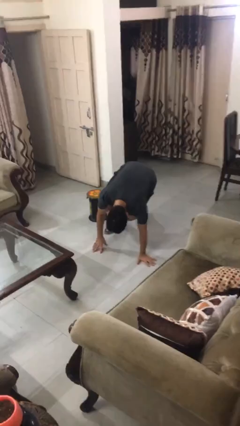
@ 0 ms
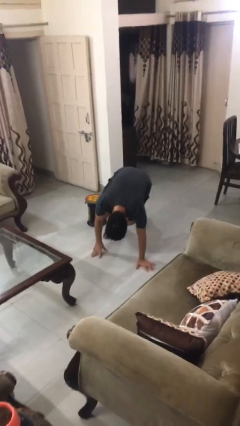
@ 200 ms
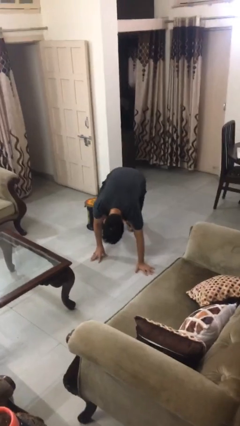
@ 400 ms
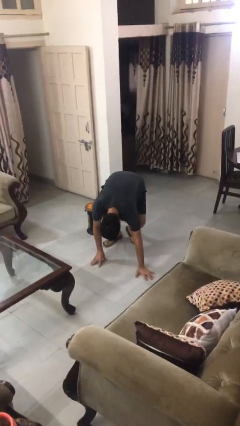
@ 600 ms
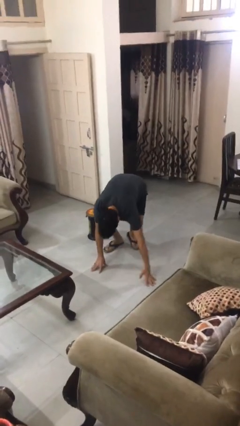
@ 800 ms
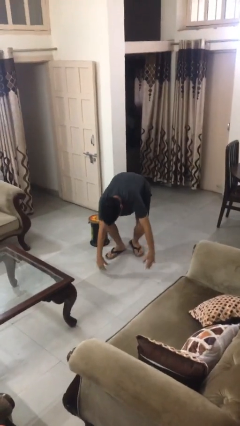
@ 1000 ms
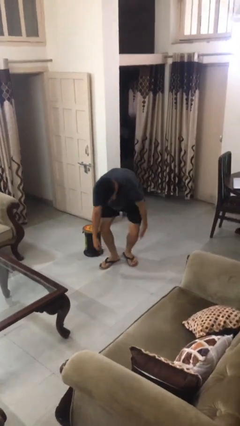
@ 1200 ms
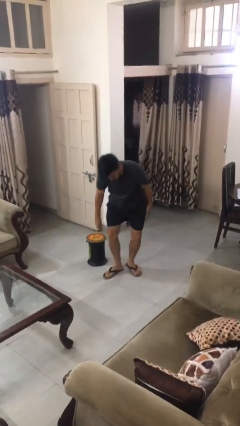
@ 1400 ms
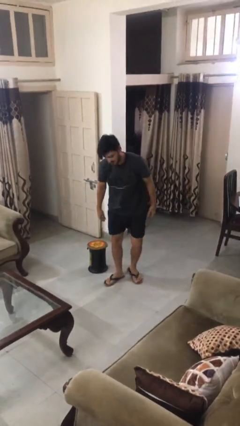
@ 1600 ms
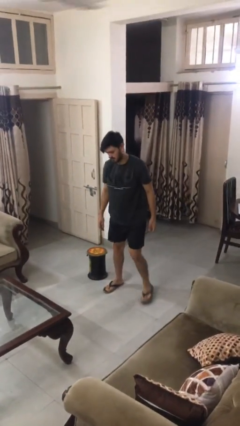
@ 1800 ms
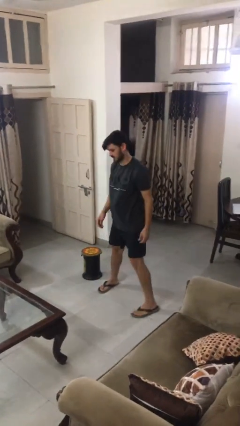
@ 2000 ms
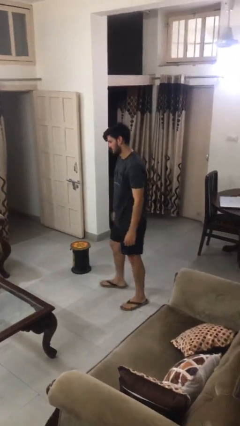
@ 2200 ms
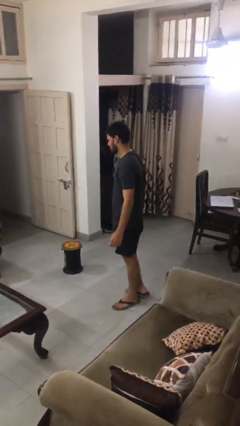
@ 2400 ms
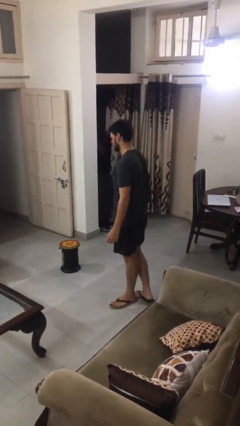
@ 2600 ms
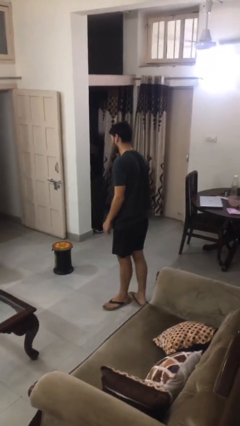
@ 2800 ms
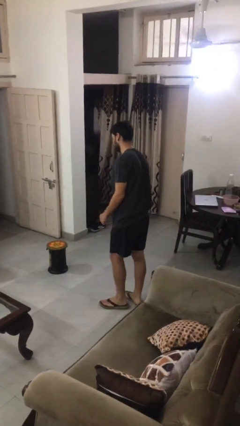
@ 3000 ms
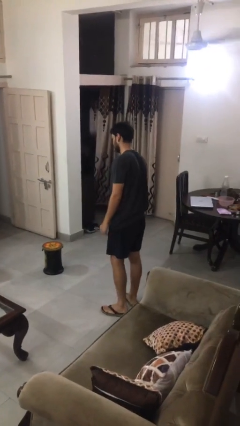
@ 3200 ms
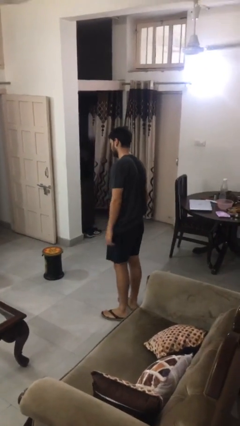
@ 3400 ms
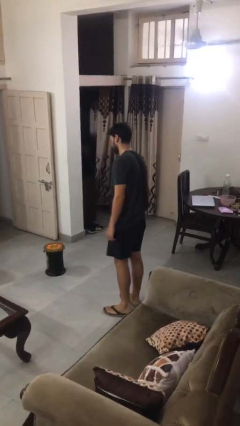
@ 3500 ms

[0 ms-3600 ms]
person stands up from floor

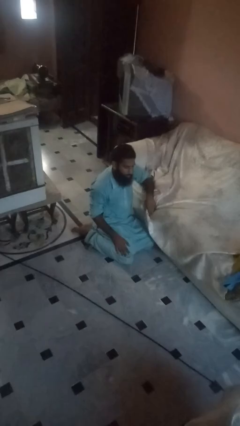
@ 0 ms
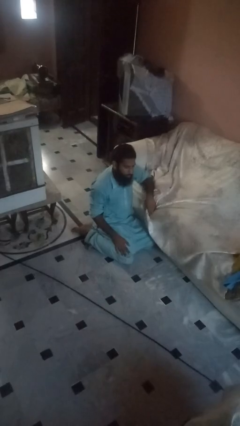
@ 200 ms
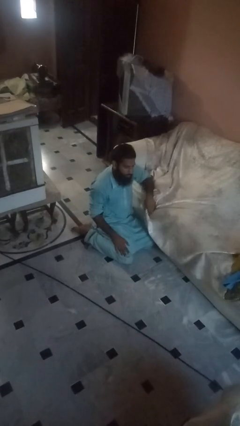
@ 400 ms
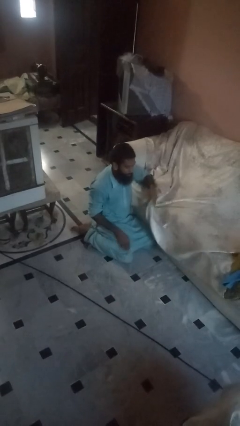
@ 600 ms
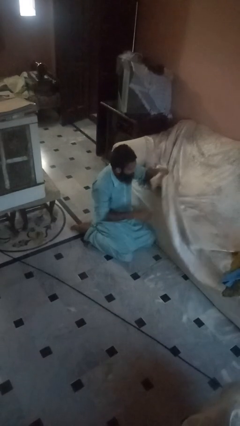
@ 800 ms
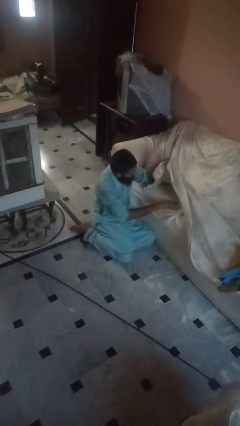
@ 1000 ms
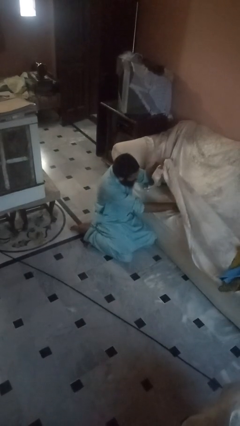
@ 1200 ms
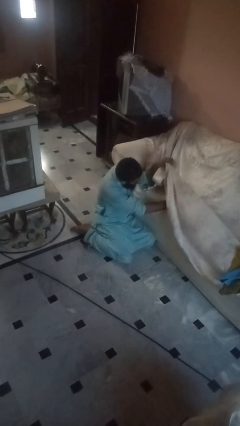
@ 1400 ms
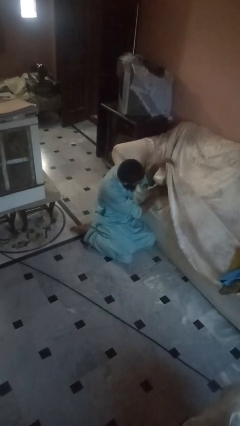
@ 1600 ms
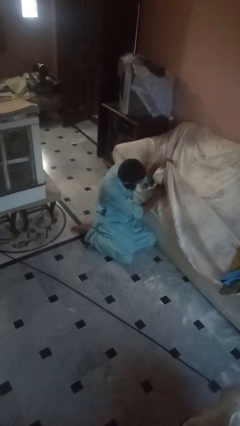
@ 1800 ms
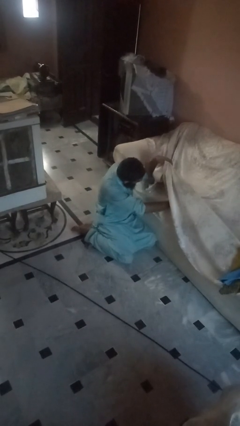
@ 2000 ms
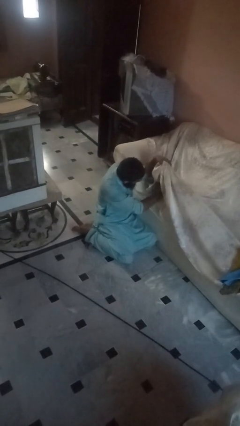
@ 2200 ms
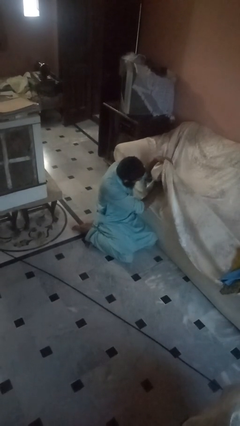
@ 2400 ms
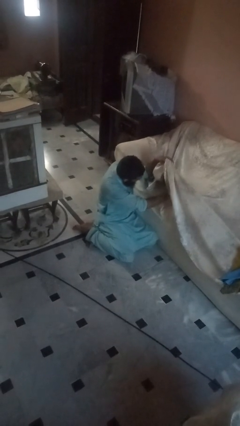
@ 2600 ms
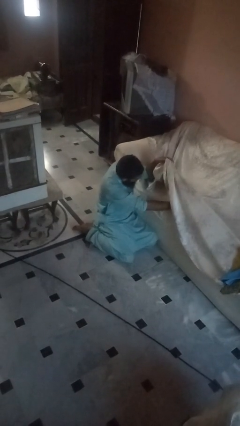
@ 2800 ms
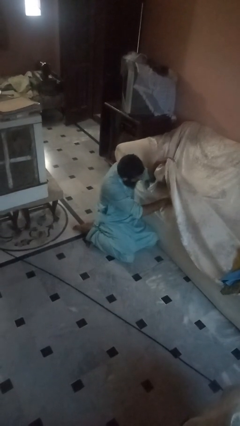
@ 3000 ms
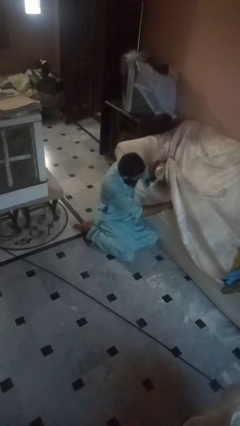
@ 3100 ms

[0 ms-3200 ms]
person searches under couch

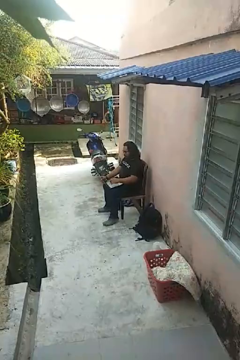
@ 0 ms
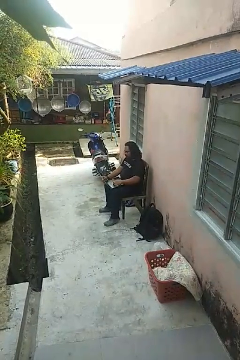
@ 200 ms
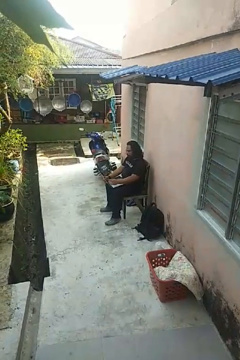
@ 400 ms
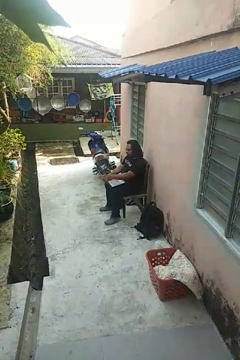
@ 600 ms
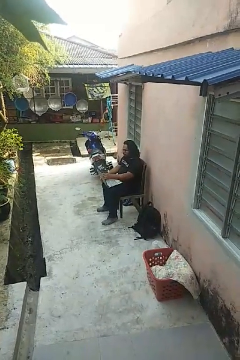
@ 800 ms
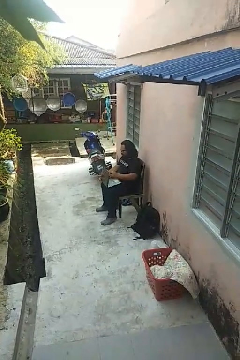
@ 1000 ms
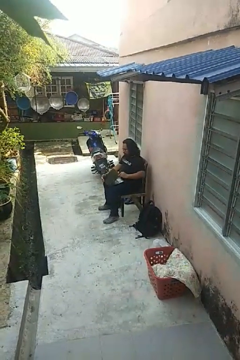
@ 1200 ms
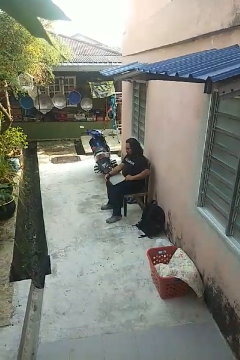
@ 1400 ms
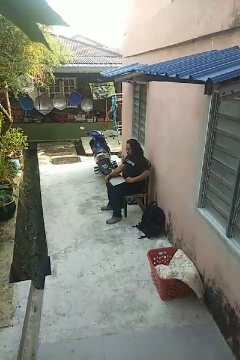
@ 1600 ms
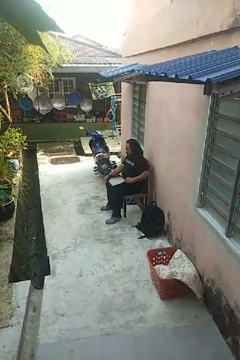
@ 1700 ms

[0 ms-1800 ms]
person closes laptop

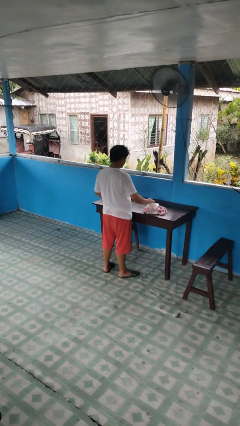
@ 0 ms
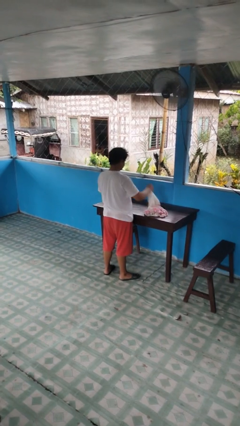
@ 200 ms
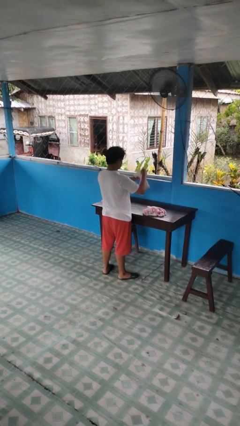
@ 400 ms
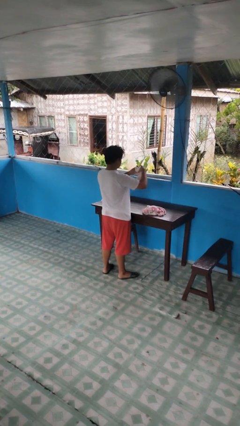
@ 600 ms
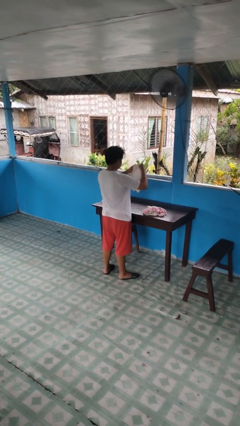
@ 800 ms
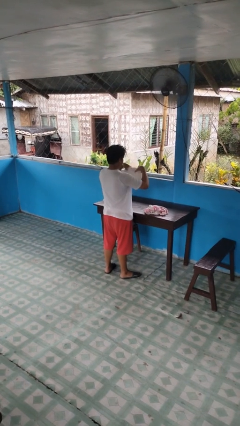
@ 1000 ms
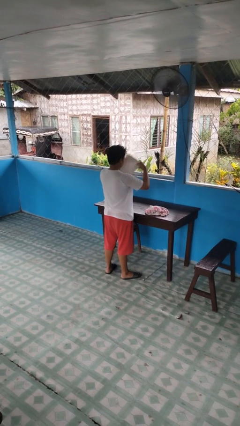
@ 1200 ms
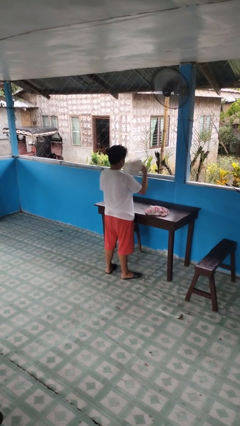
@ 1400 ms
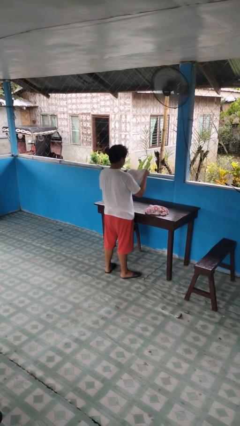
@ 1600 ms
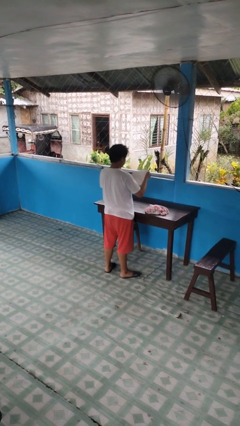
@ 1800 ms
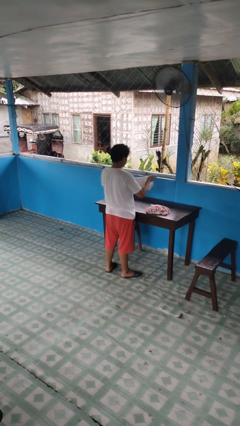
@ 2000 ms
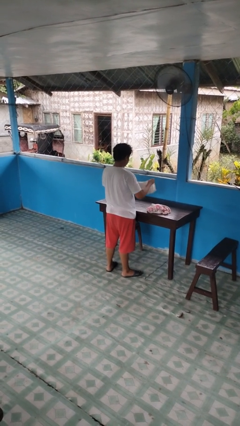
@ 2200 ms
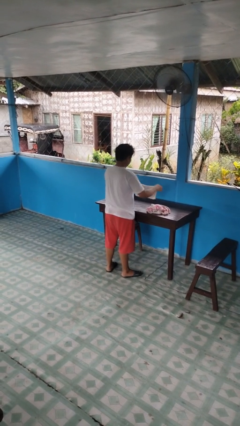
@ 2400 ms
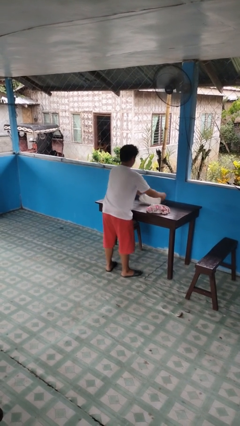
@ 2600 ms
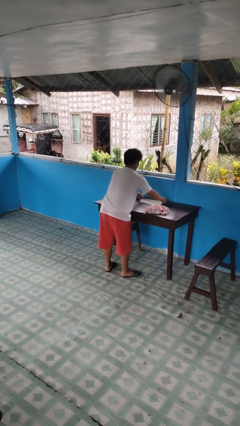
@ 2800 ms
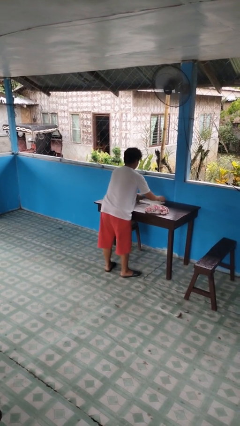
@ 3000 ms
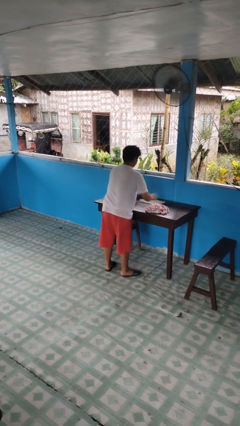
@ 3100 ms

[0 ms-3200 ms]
person folds towel

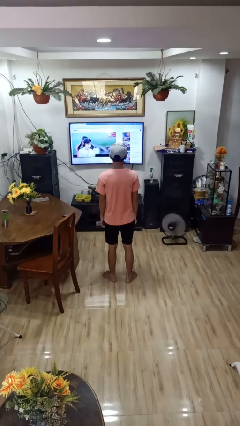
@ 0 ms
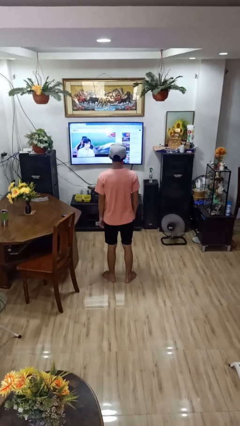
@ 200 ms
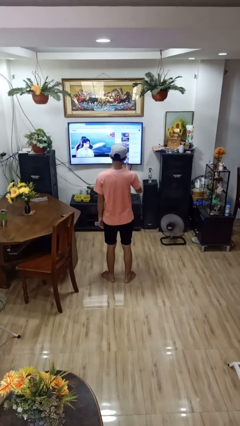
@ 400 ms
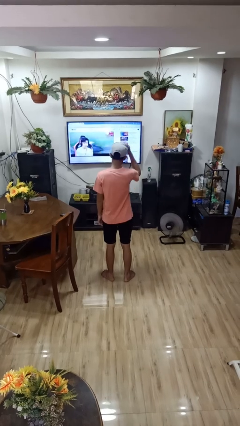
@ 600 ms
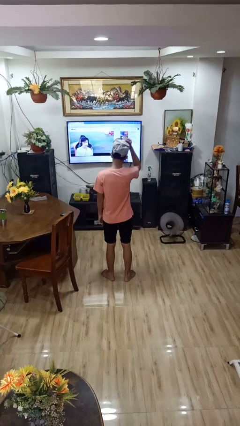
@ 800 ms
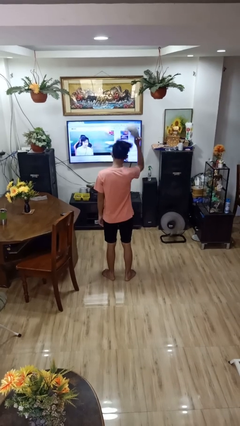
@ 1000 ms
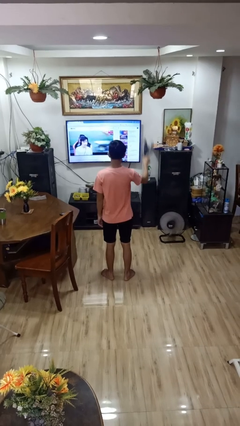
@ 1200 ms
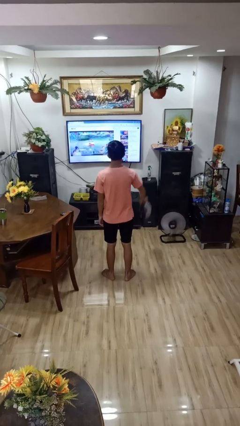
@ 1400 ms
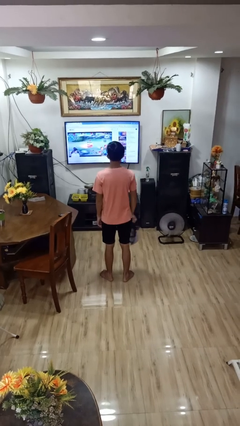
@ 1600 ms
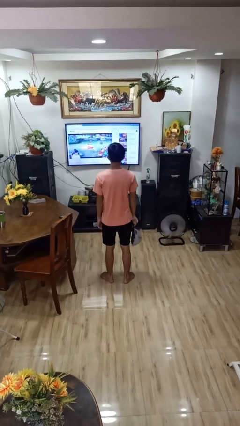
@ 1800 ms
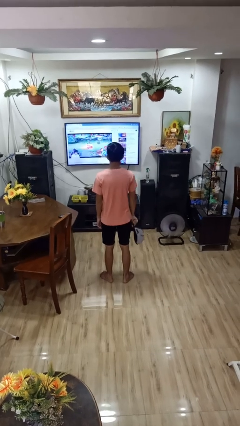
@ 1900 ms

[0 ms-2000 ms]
person takes off hat

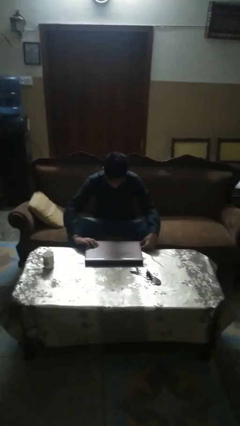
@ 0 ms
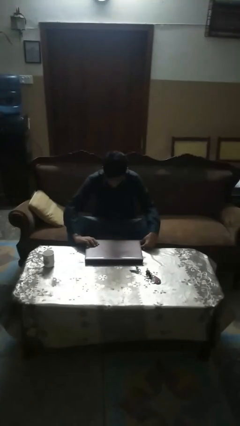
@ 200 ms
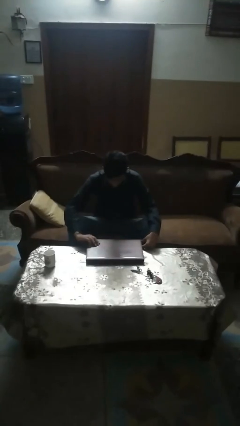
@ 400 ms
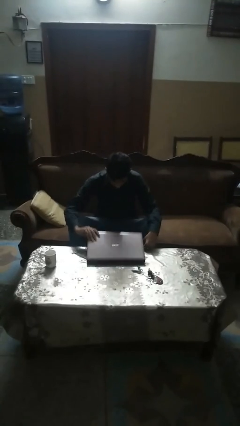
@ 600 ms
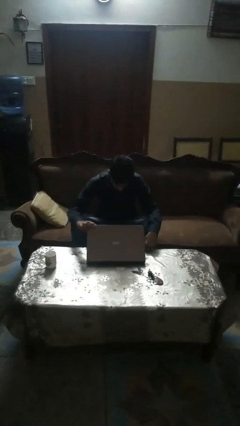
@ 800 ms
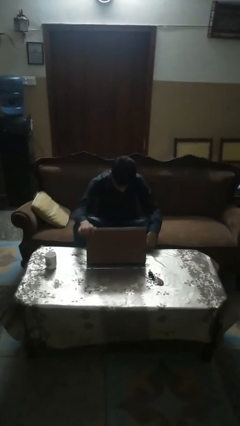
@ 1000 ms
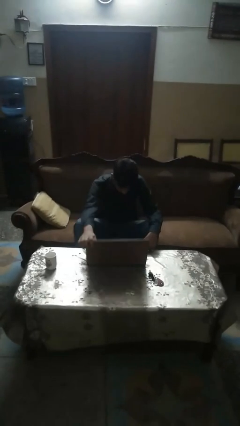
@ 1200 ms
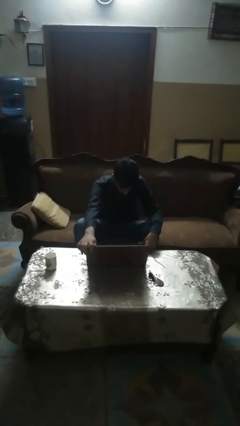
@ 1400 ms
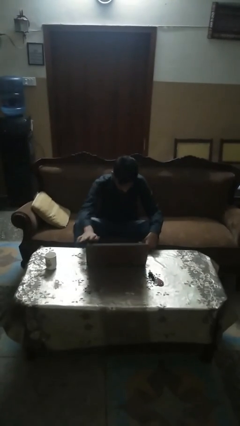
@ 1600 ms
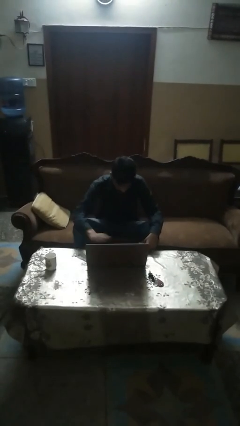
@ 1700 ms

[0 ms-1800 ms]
person opens laptop

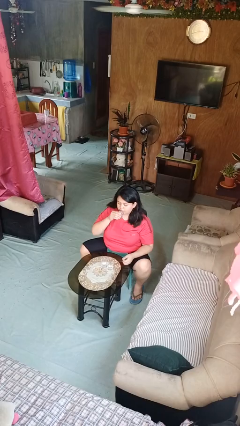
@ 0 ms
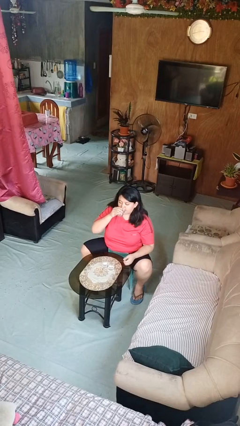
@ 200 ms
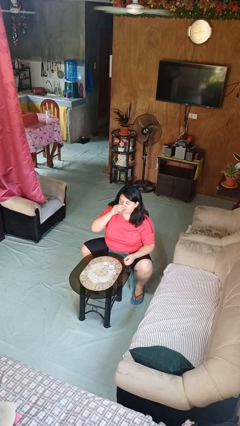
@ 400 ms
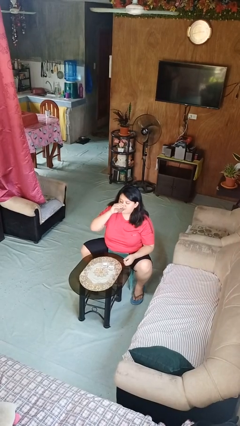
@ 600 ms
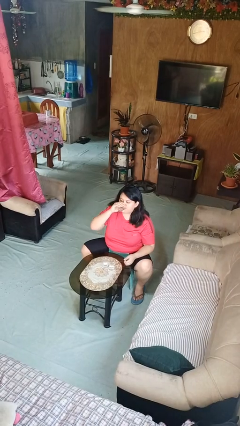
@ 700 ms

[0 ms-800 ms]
person drinks from shotglass

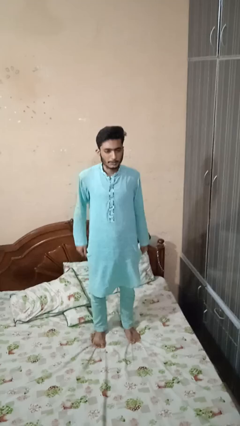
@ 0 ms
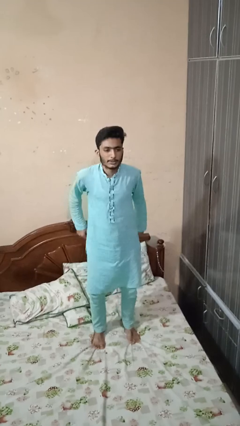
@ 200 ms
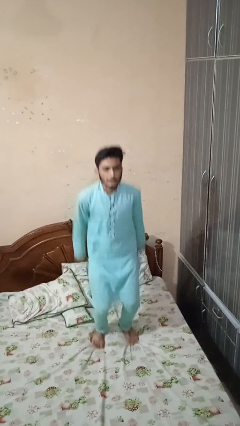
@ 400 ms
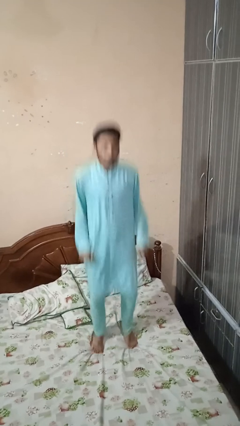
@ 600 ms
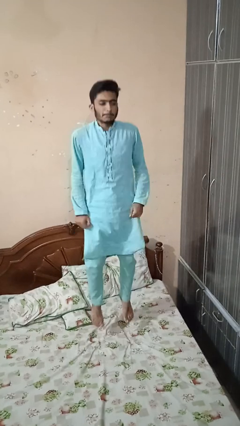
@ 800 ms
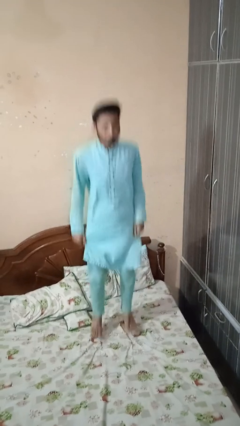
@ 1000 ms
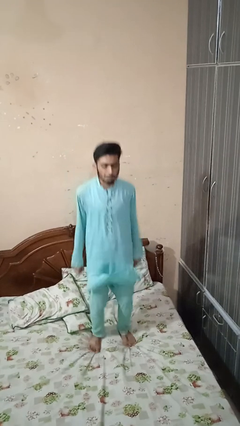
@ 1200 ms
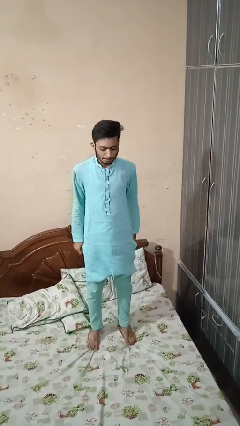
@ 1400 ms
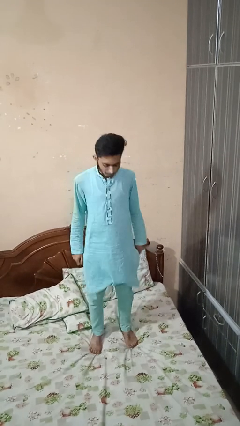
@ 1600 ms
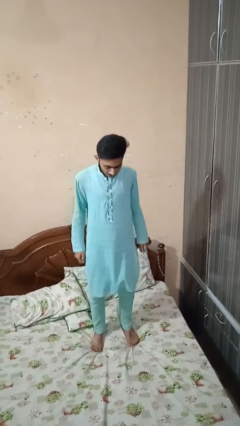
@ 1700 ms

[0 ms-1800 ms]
person jumps on bed
